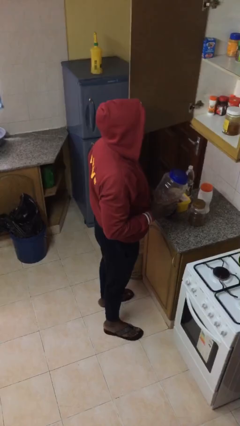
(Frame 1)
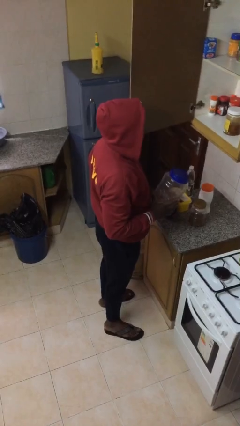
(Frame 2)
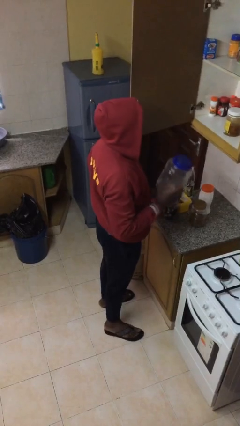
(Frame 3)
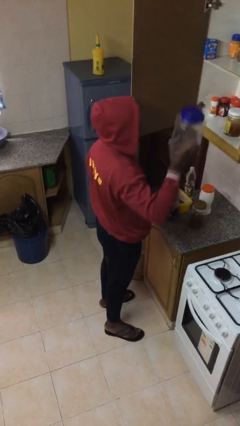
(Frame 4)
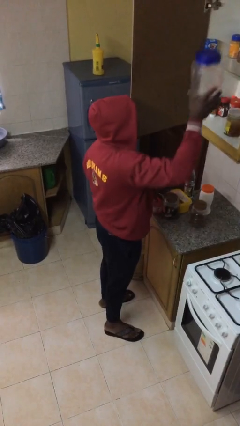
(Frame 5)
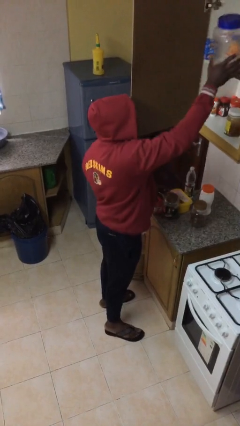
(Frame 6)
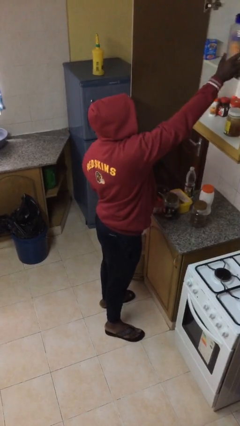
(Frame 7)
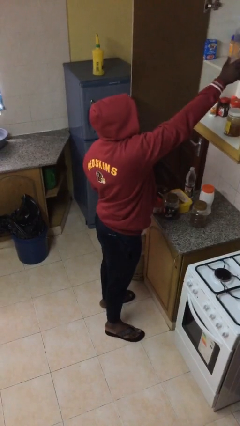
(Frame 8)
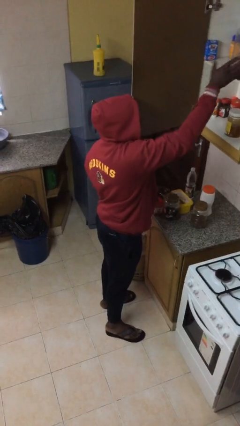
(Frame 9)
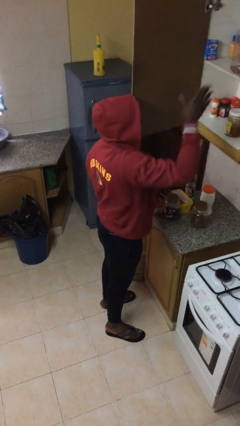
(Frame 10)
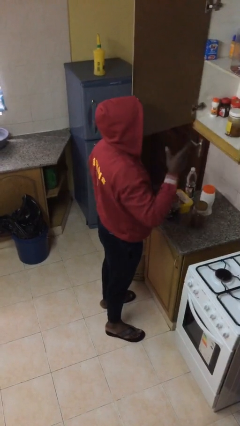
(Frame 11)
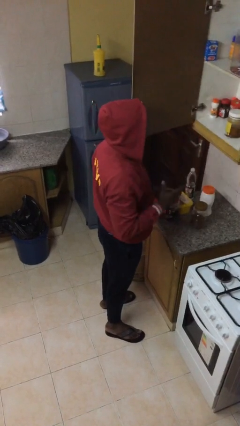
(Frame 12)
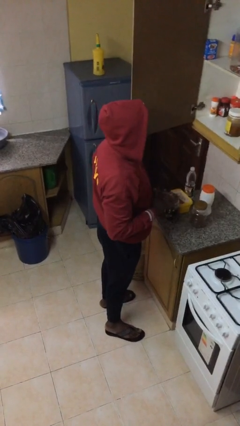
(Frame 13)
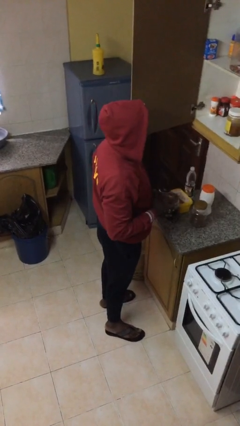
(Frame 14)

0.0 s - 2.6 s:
person puts down object on shelf

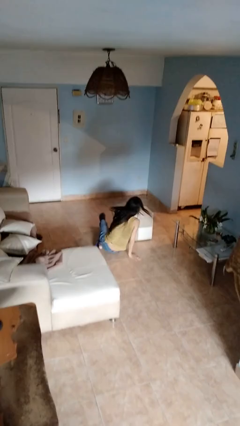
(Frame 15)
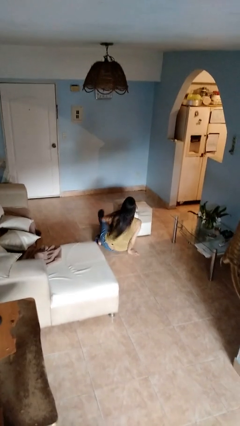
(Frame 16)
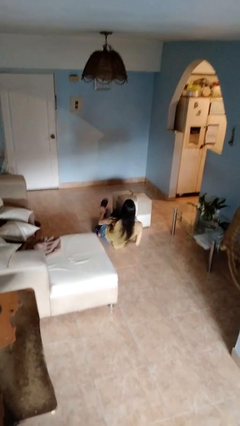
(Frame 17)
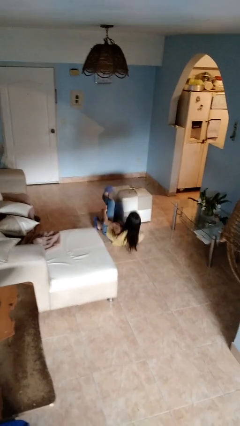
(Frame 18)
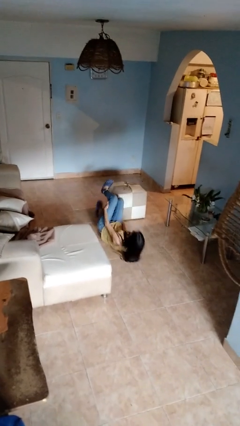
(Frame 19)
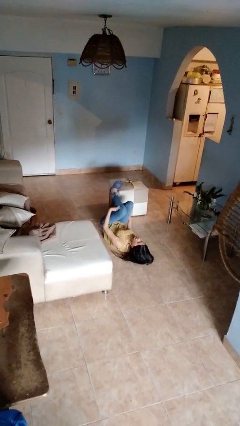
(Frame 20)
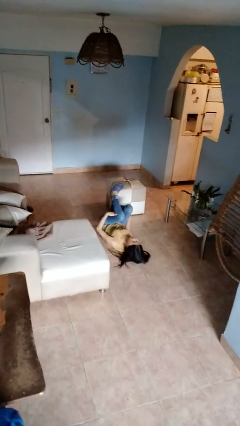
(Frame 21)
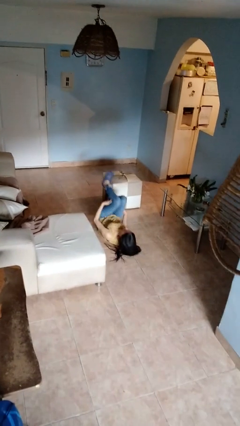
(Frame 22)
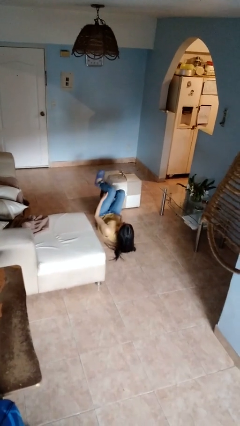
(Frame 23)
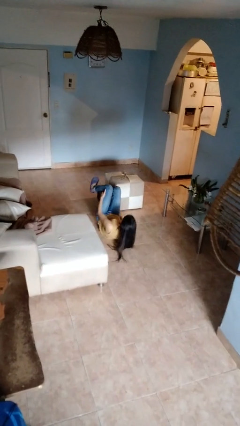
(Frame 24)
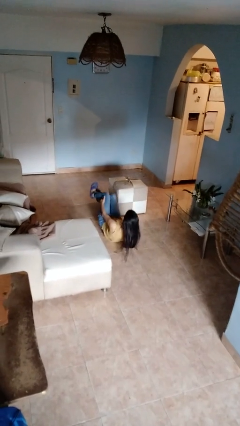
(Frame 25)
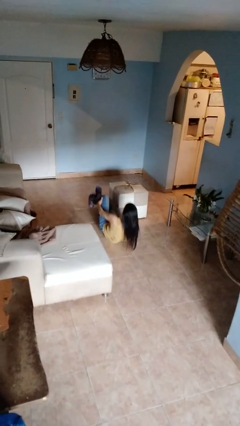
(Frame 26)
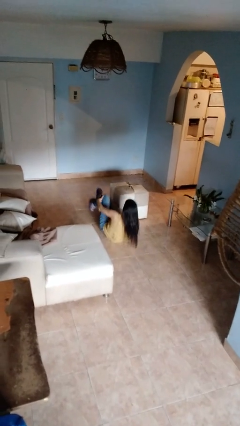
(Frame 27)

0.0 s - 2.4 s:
person lies down on floor

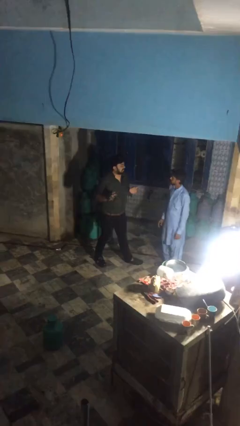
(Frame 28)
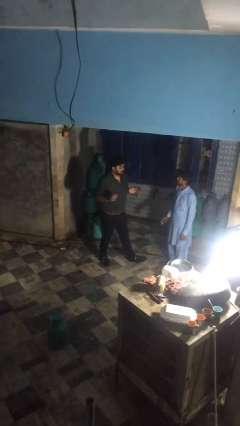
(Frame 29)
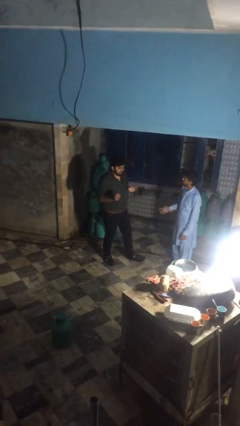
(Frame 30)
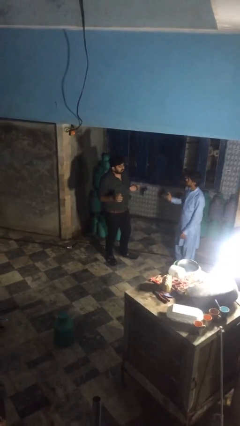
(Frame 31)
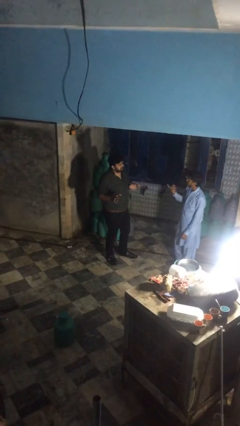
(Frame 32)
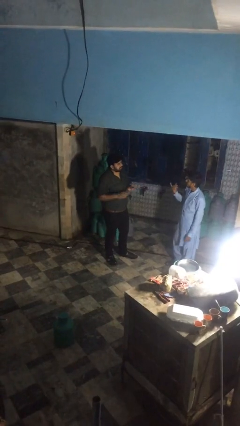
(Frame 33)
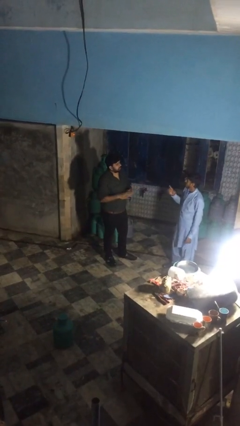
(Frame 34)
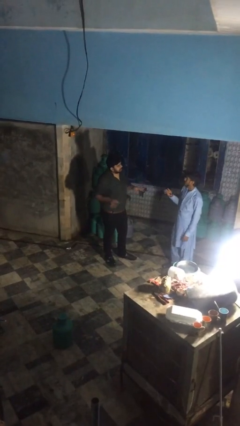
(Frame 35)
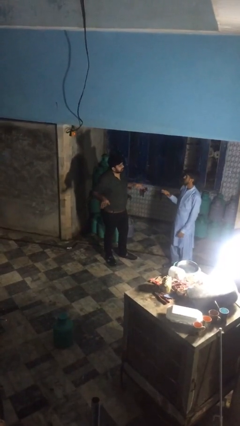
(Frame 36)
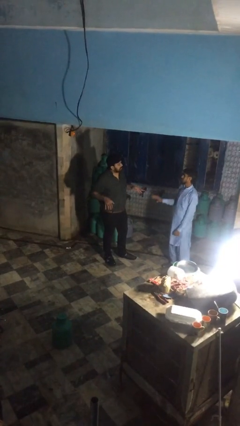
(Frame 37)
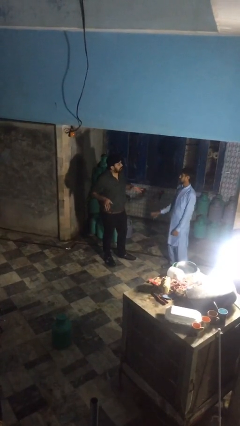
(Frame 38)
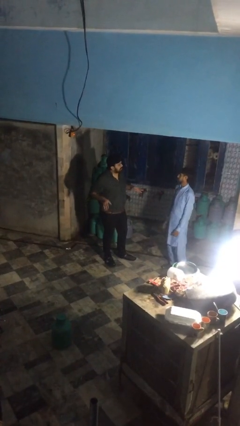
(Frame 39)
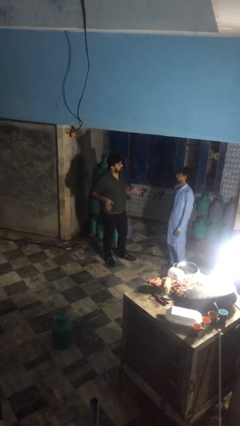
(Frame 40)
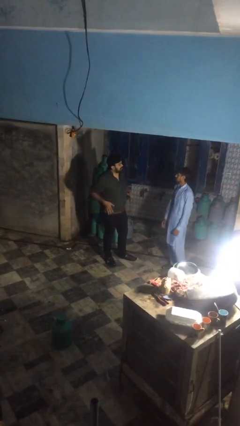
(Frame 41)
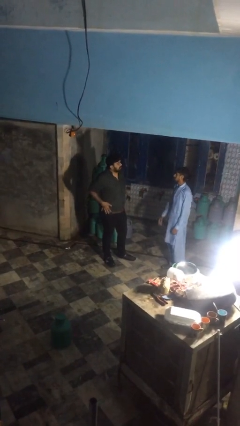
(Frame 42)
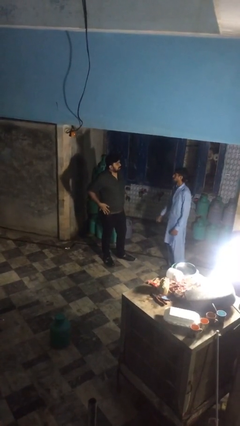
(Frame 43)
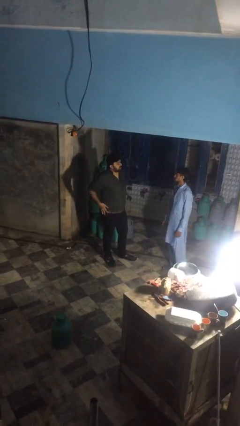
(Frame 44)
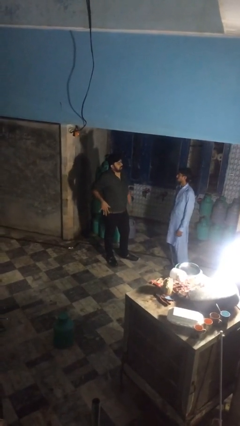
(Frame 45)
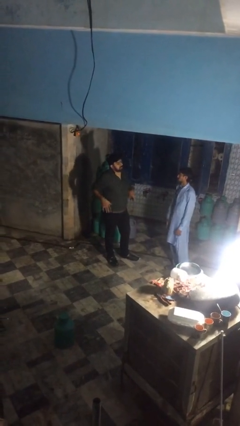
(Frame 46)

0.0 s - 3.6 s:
person talks to person

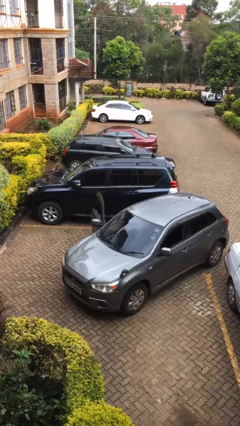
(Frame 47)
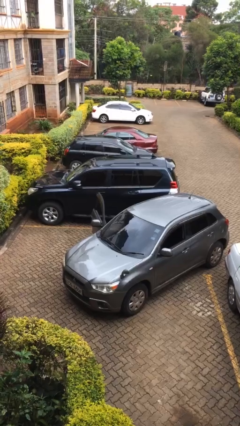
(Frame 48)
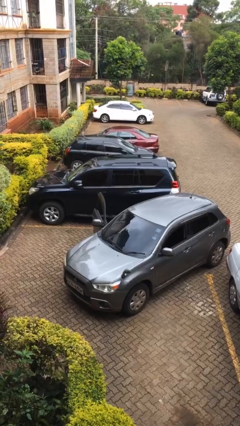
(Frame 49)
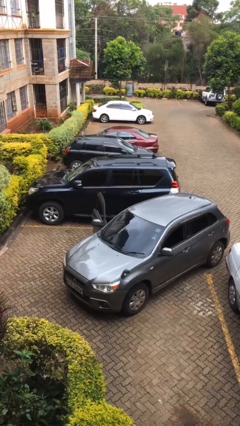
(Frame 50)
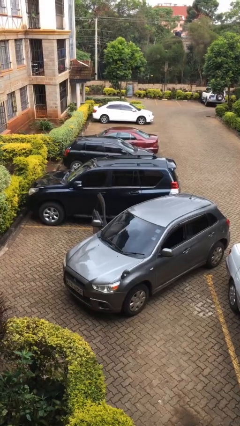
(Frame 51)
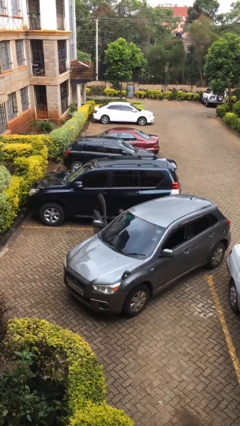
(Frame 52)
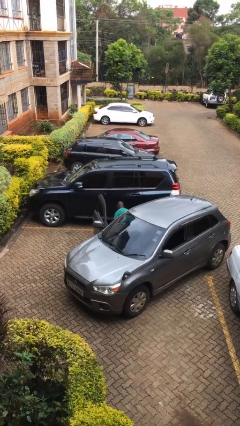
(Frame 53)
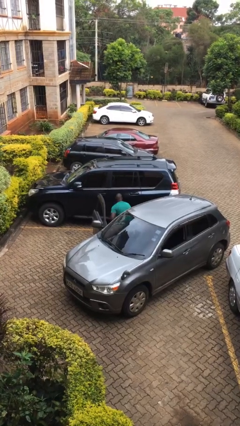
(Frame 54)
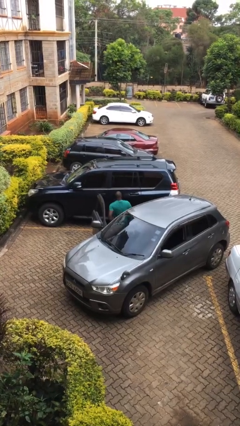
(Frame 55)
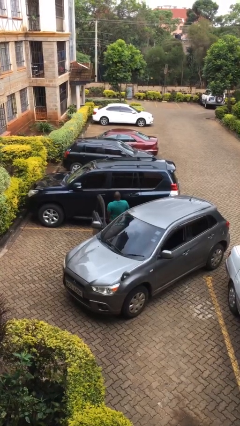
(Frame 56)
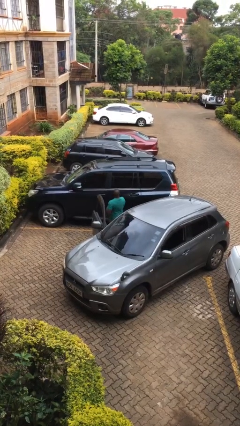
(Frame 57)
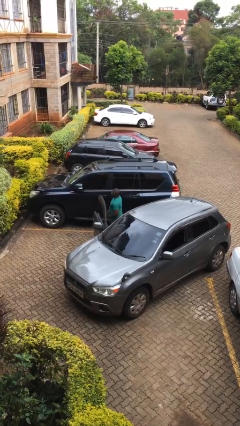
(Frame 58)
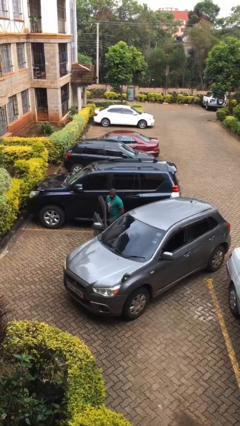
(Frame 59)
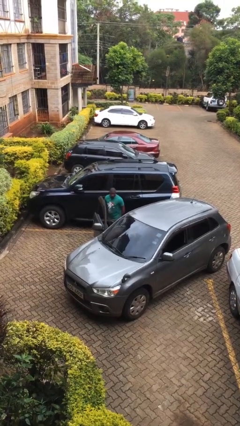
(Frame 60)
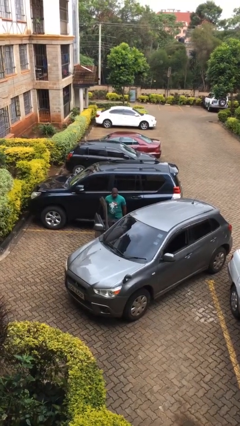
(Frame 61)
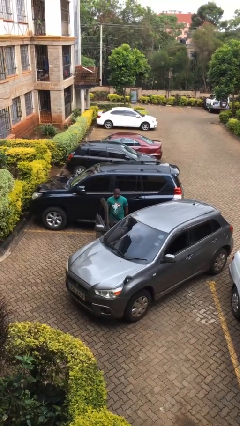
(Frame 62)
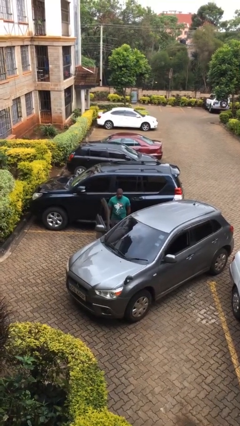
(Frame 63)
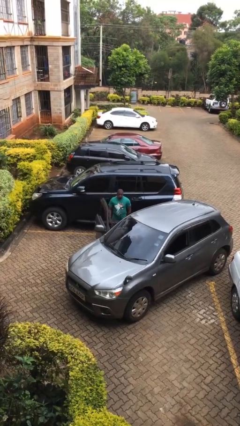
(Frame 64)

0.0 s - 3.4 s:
person exits car

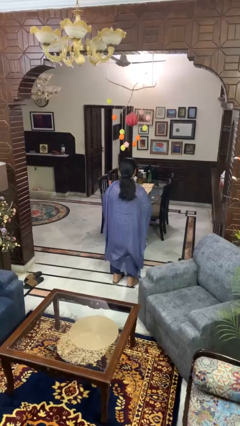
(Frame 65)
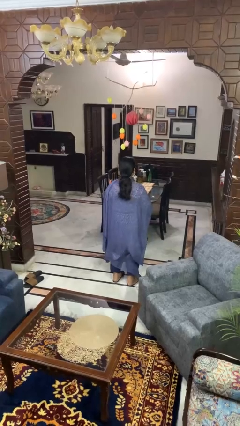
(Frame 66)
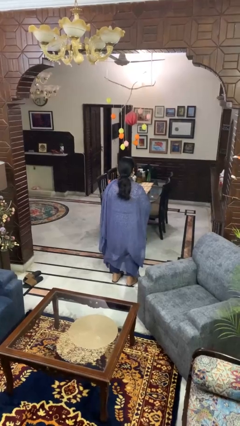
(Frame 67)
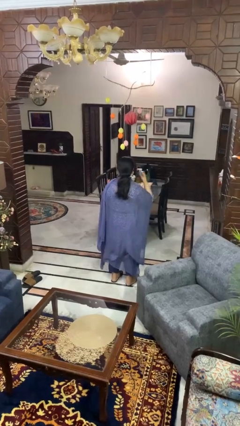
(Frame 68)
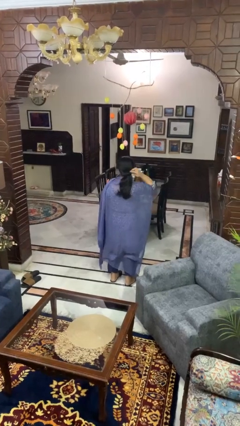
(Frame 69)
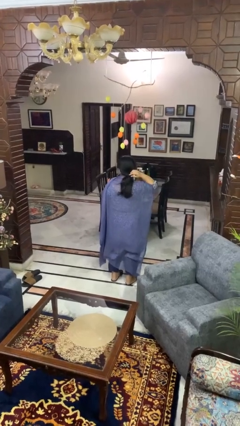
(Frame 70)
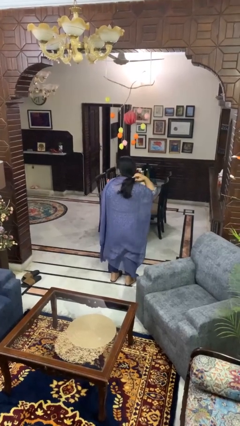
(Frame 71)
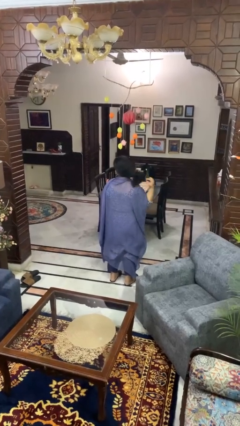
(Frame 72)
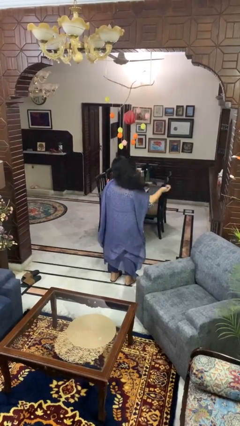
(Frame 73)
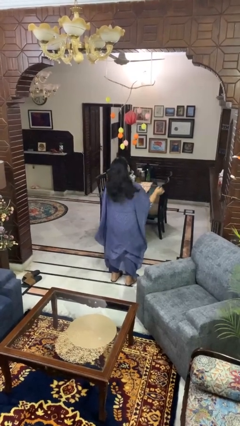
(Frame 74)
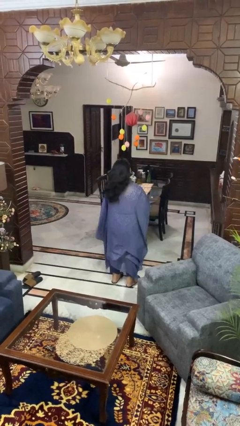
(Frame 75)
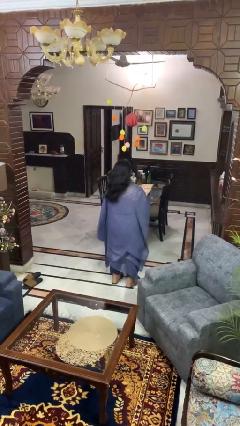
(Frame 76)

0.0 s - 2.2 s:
person takes off hairtie

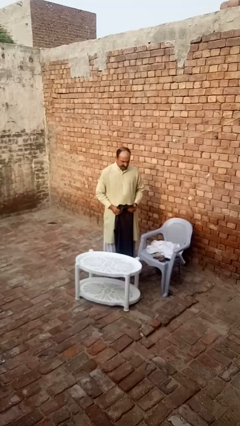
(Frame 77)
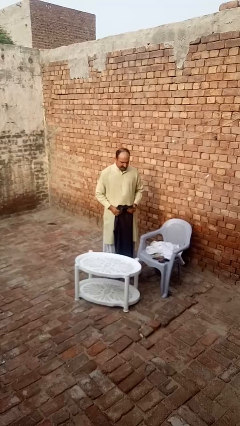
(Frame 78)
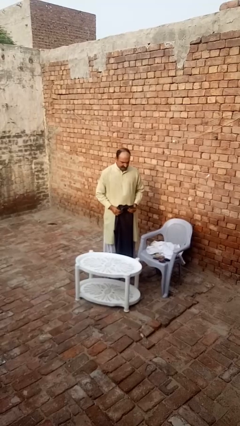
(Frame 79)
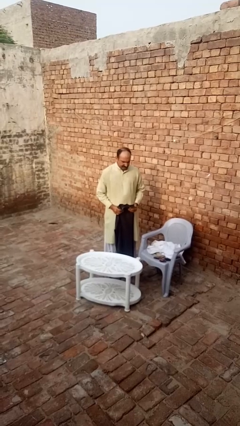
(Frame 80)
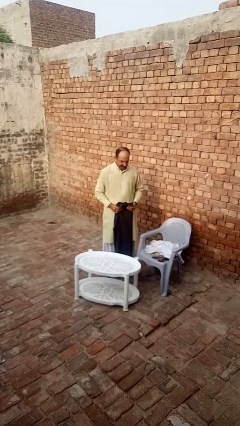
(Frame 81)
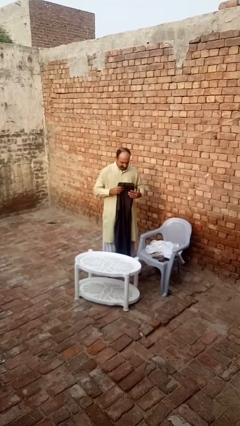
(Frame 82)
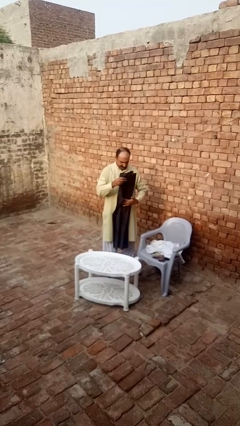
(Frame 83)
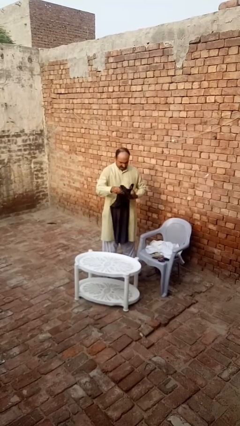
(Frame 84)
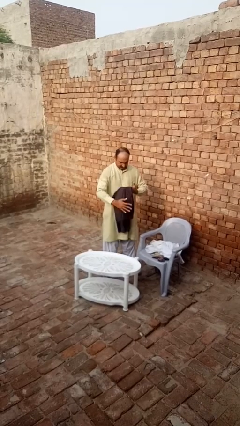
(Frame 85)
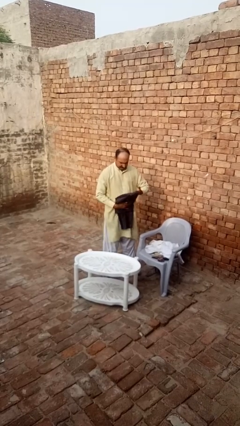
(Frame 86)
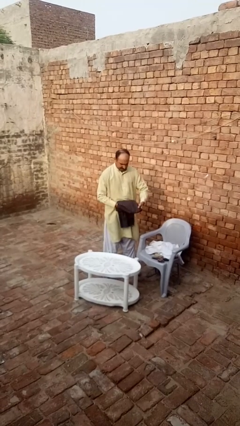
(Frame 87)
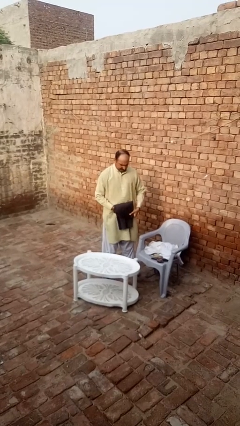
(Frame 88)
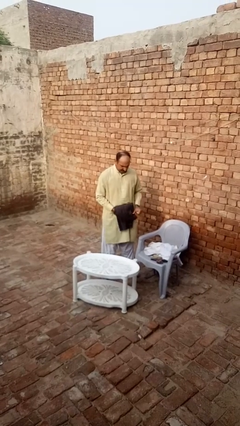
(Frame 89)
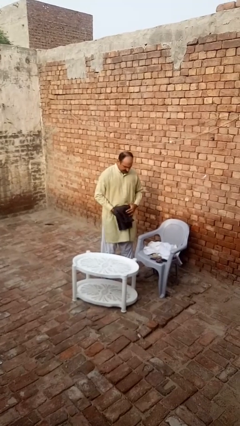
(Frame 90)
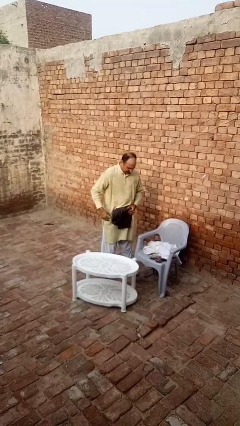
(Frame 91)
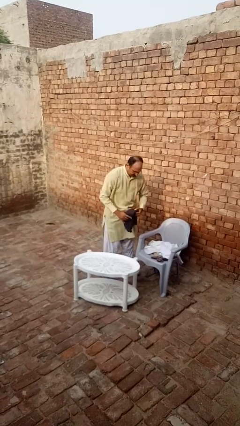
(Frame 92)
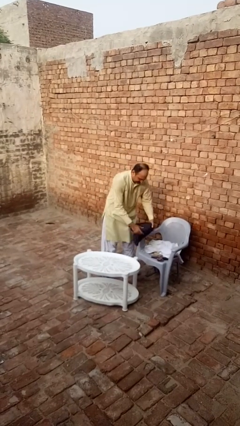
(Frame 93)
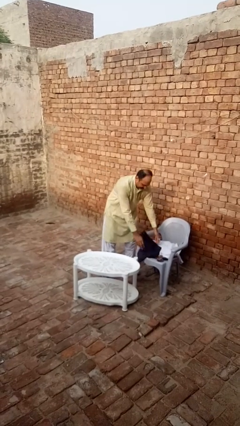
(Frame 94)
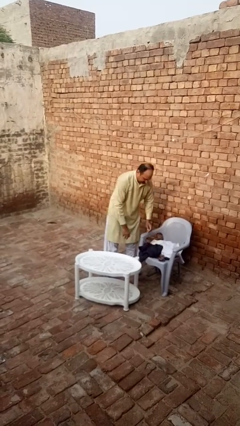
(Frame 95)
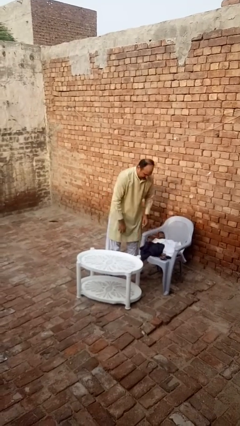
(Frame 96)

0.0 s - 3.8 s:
person folds pants
